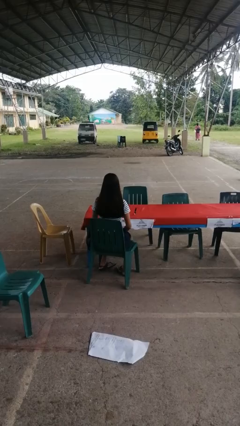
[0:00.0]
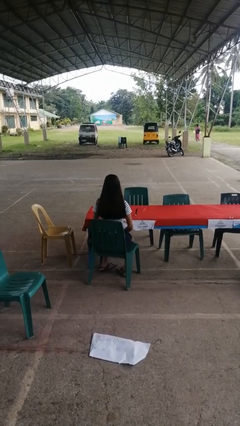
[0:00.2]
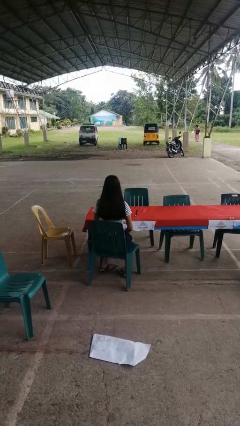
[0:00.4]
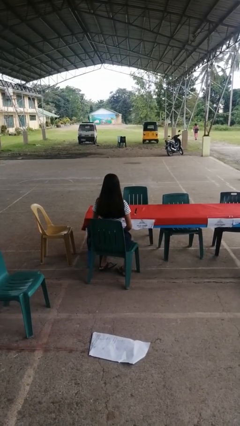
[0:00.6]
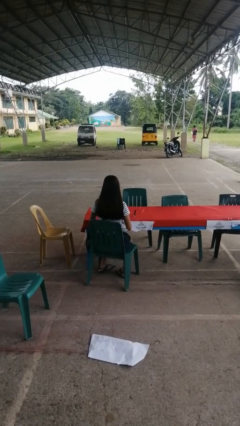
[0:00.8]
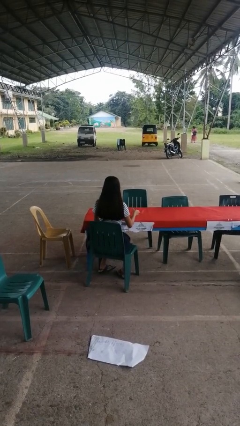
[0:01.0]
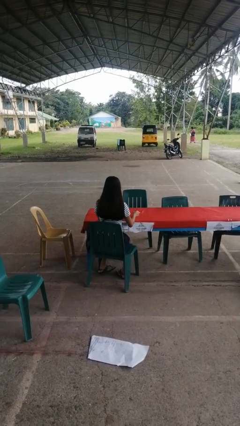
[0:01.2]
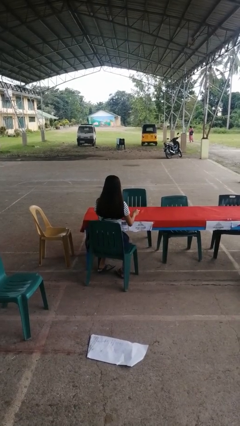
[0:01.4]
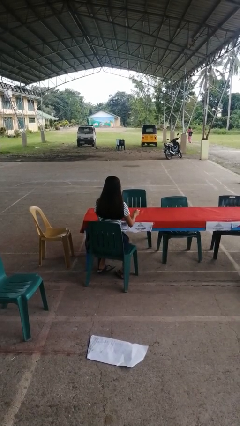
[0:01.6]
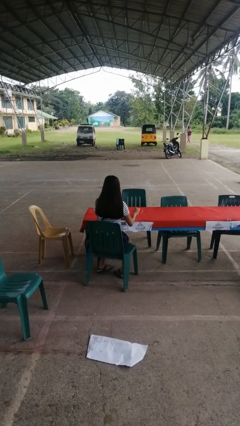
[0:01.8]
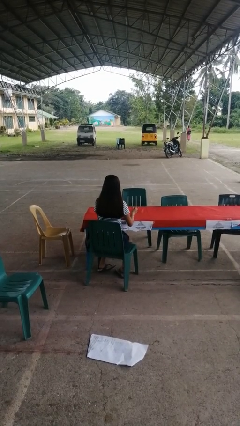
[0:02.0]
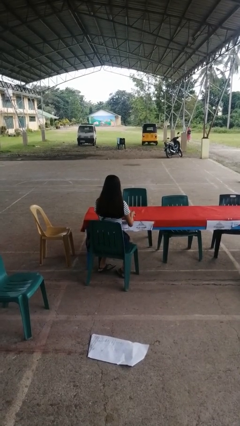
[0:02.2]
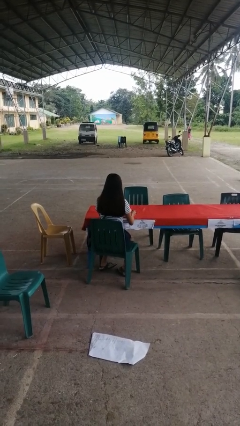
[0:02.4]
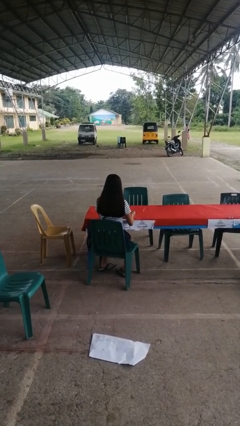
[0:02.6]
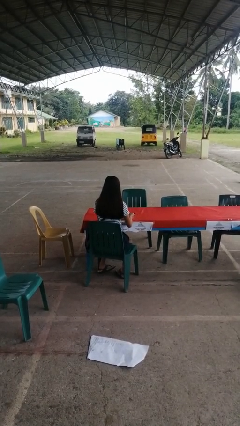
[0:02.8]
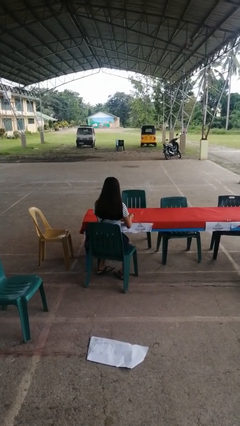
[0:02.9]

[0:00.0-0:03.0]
person paints fingernails

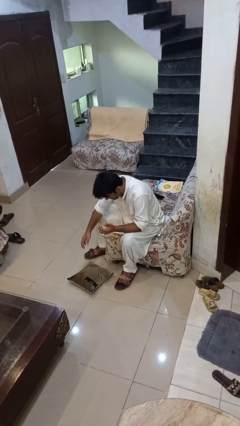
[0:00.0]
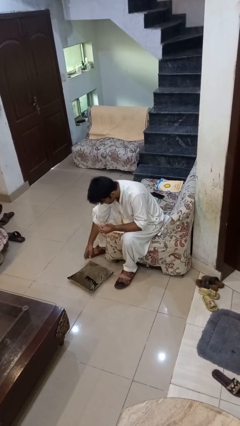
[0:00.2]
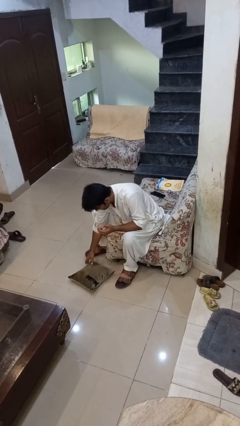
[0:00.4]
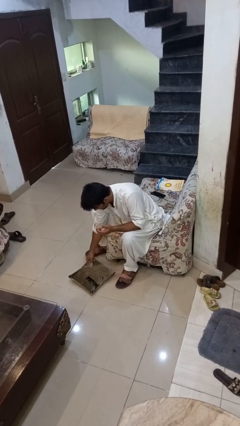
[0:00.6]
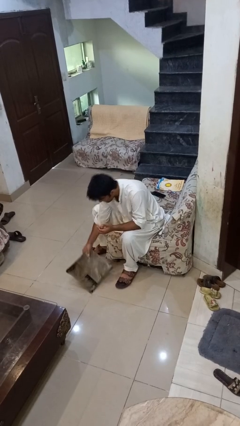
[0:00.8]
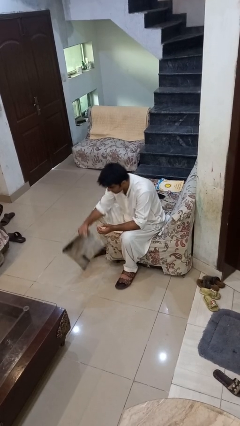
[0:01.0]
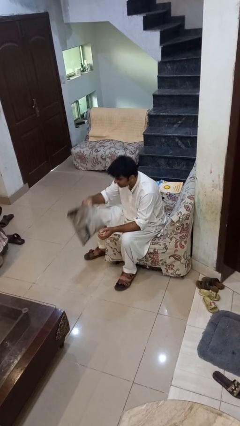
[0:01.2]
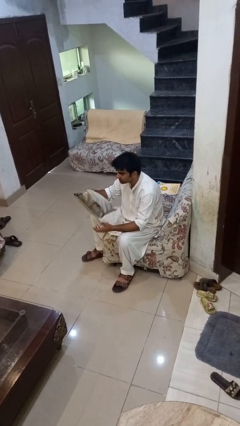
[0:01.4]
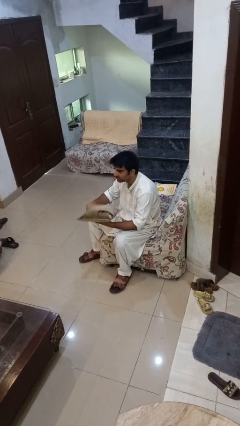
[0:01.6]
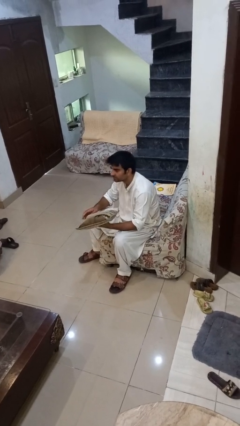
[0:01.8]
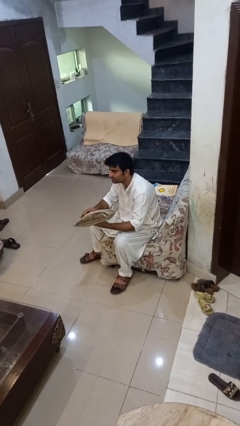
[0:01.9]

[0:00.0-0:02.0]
person picks up object from floor

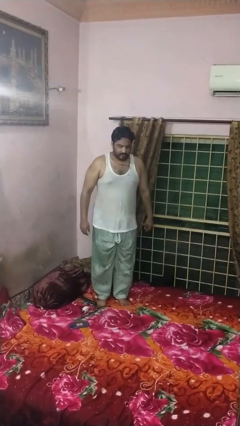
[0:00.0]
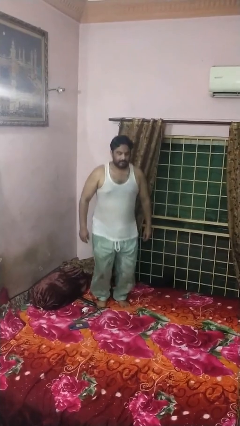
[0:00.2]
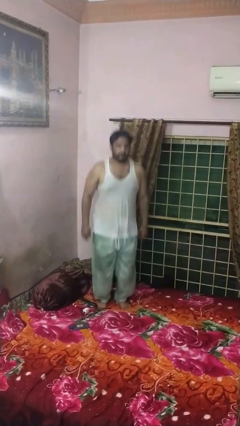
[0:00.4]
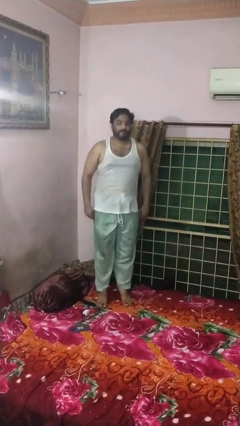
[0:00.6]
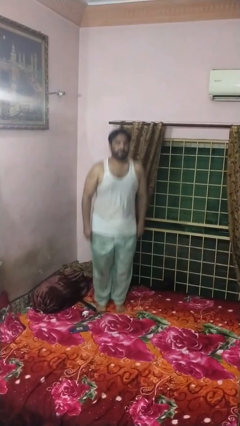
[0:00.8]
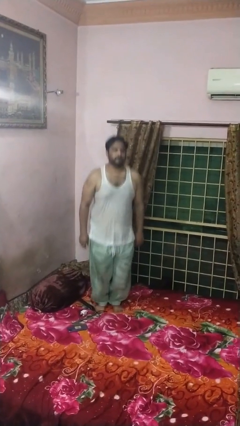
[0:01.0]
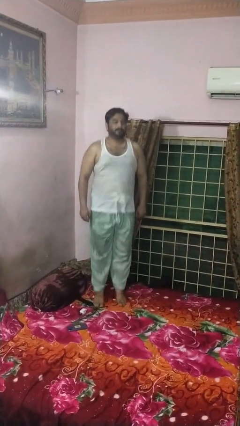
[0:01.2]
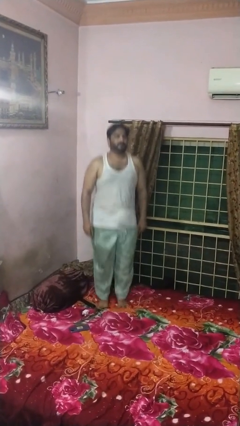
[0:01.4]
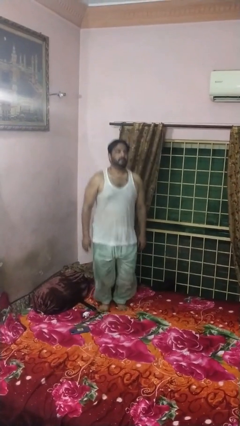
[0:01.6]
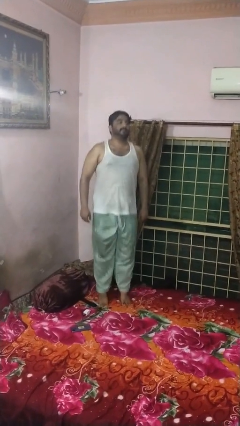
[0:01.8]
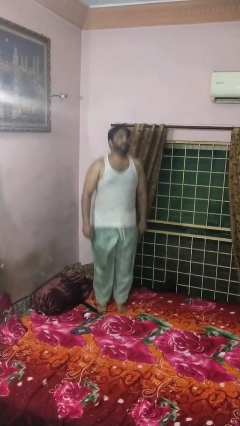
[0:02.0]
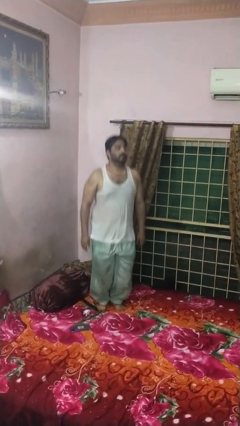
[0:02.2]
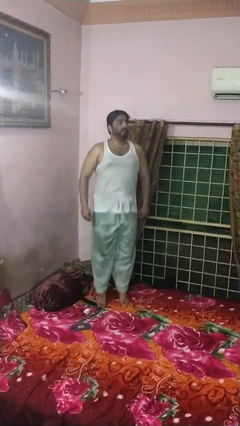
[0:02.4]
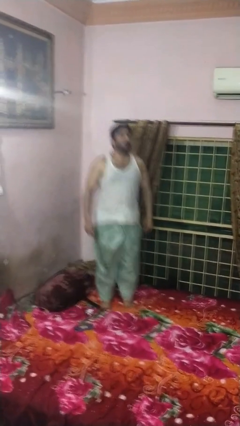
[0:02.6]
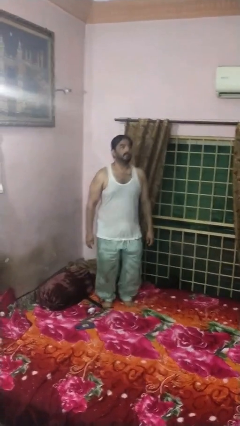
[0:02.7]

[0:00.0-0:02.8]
person jumps on bed

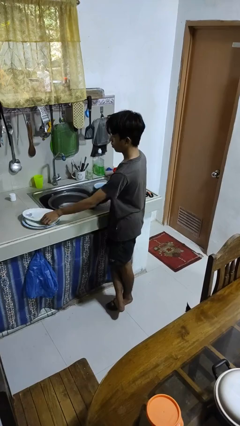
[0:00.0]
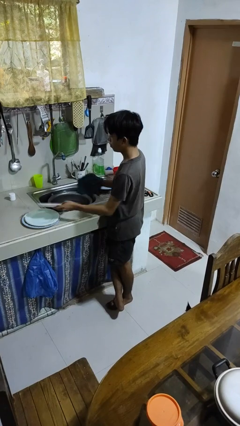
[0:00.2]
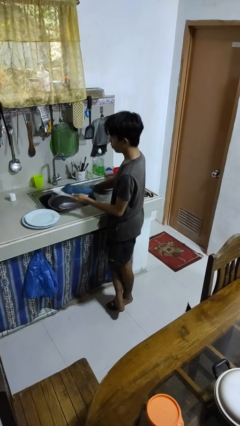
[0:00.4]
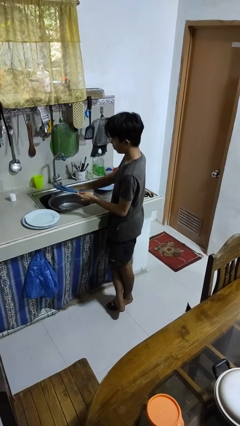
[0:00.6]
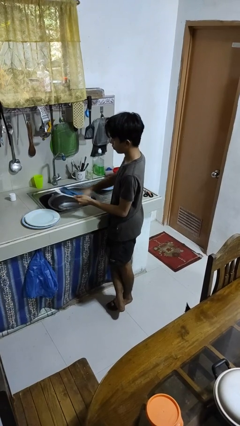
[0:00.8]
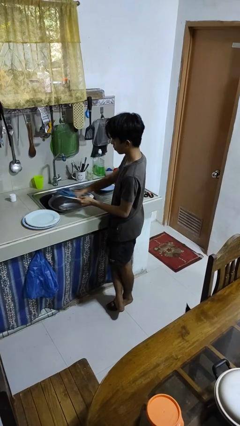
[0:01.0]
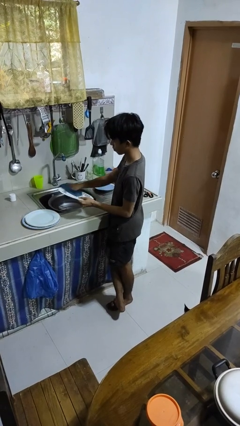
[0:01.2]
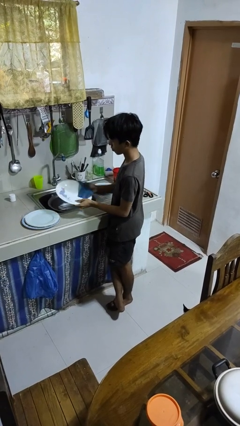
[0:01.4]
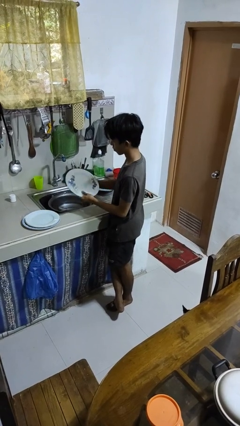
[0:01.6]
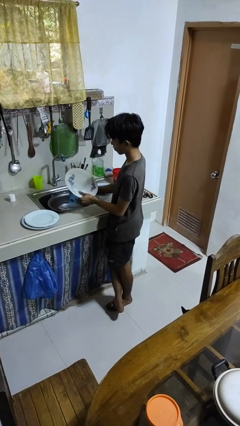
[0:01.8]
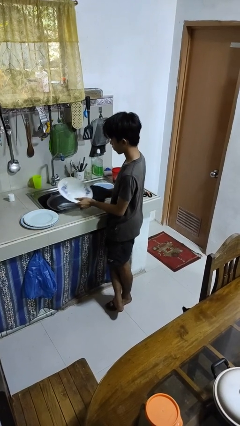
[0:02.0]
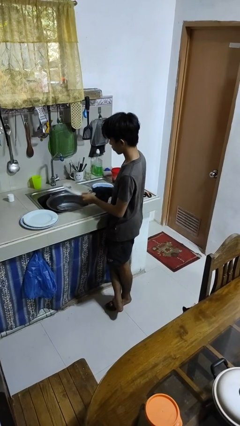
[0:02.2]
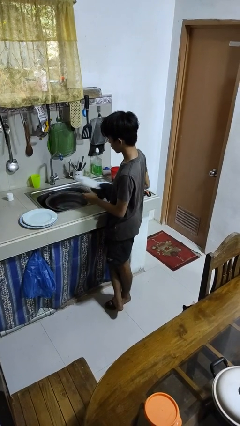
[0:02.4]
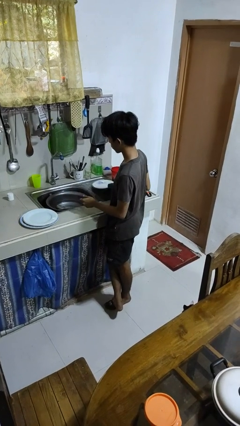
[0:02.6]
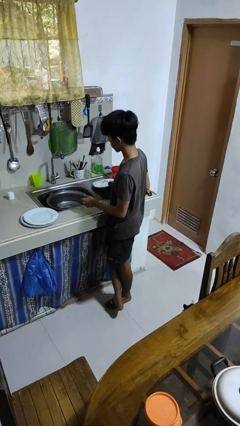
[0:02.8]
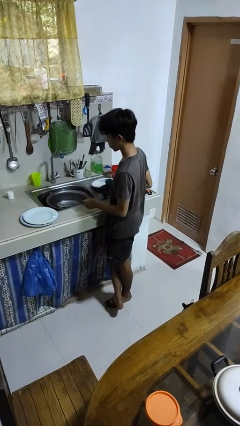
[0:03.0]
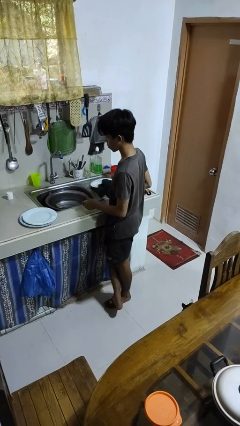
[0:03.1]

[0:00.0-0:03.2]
person dries dish

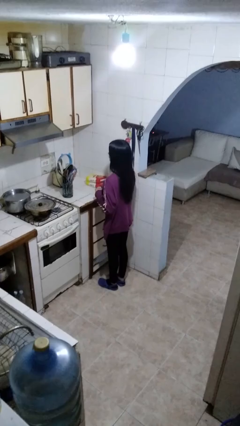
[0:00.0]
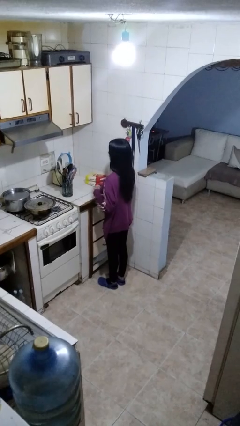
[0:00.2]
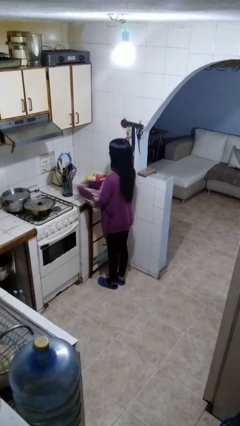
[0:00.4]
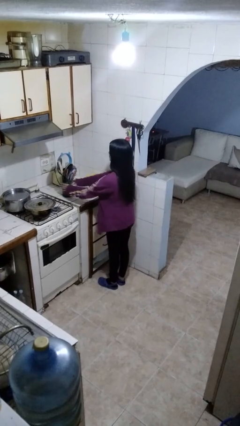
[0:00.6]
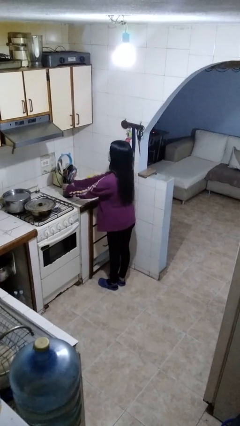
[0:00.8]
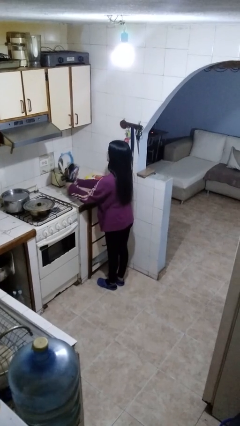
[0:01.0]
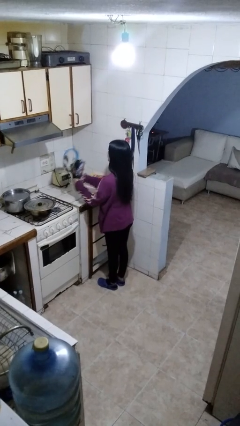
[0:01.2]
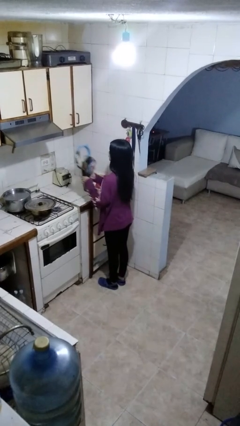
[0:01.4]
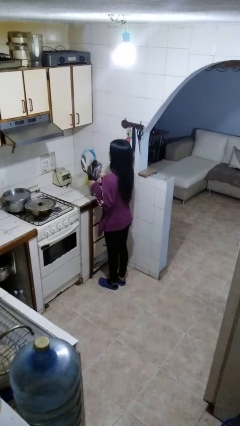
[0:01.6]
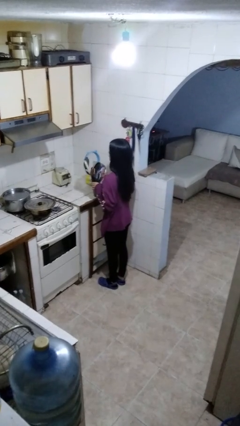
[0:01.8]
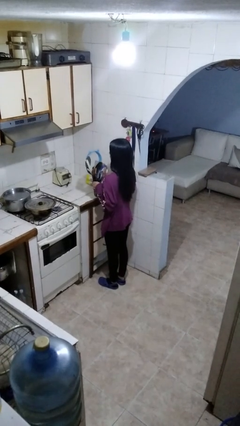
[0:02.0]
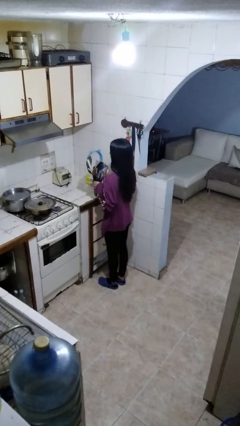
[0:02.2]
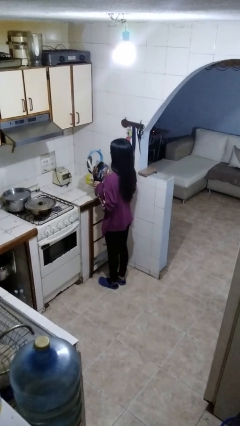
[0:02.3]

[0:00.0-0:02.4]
person puts down object on countertop

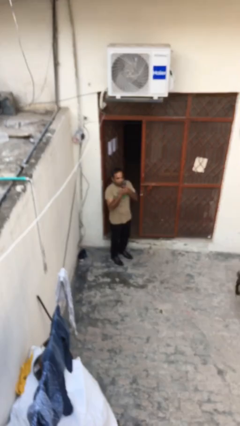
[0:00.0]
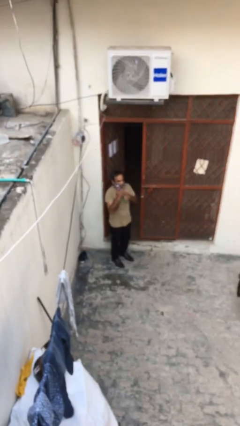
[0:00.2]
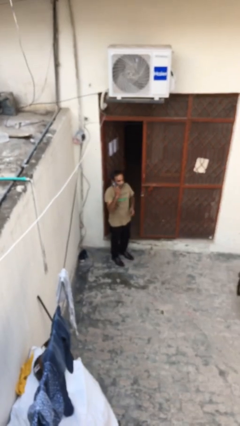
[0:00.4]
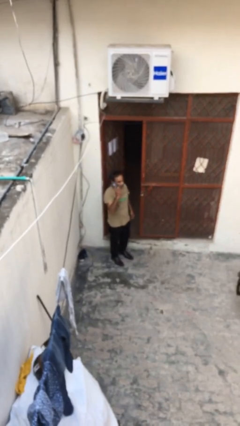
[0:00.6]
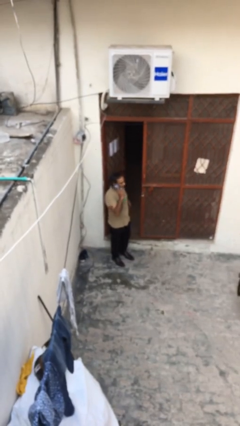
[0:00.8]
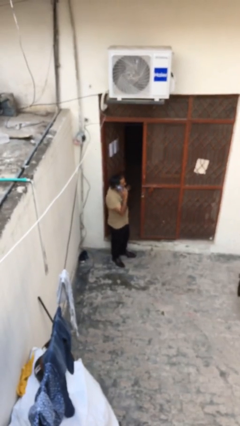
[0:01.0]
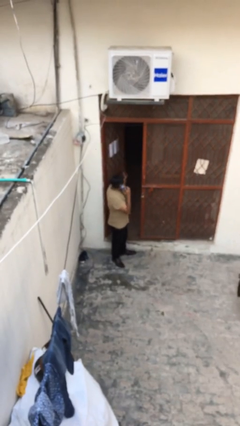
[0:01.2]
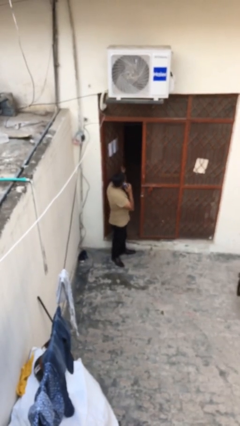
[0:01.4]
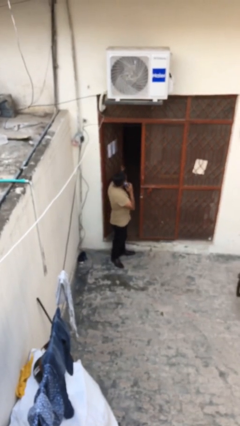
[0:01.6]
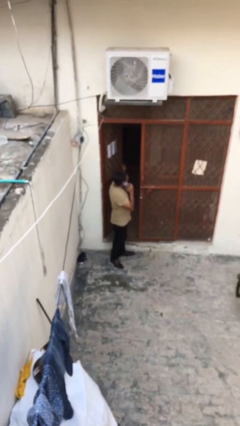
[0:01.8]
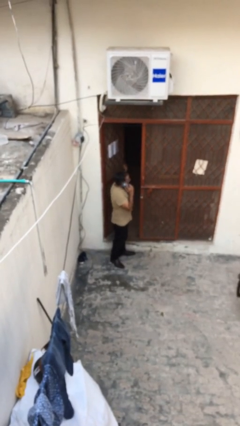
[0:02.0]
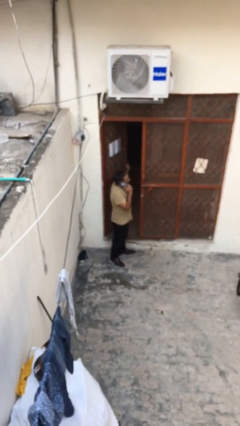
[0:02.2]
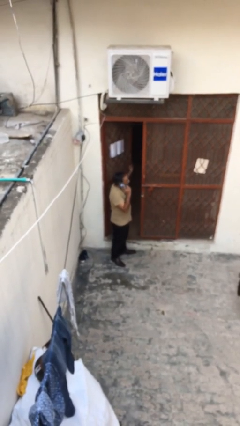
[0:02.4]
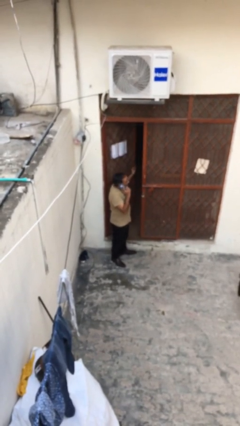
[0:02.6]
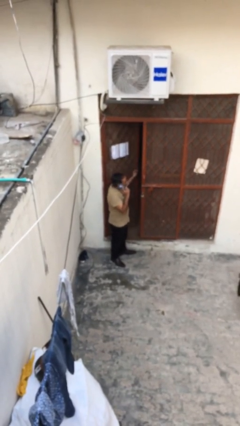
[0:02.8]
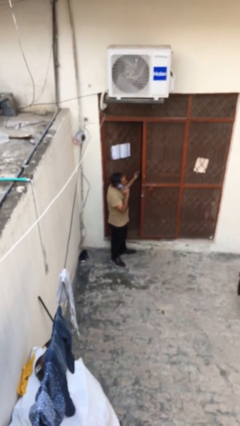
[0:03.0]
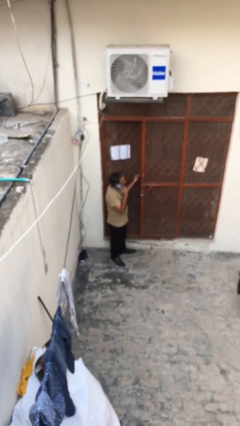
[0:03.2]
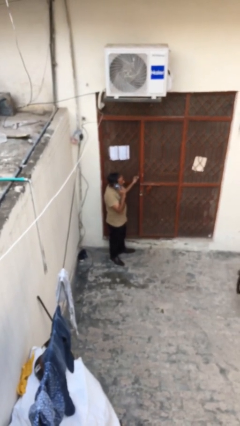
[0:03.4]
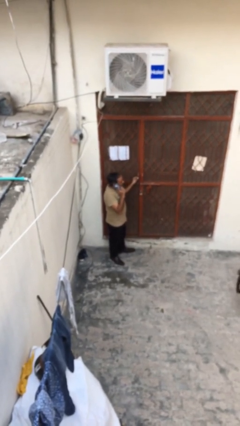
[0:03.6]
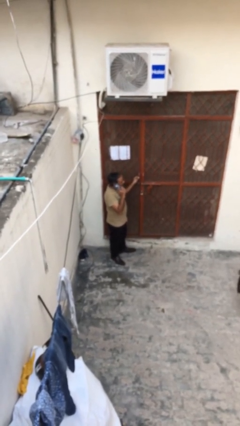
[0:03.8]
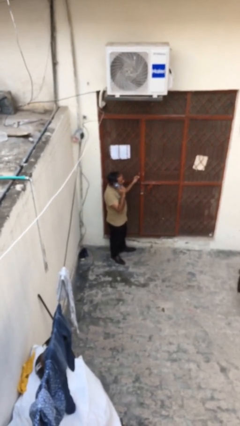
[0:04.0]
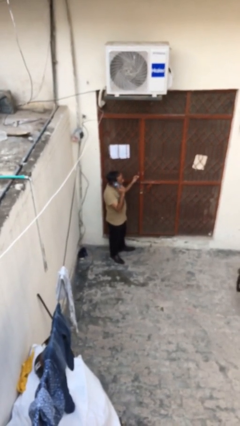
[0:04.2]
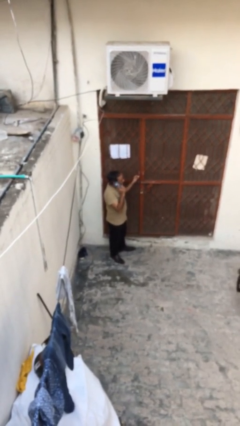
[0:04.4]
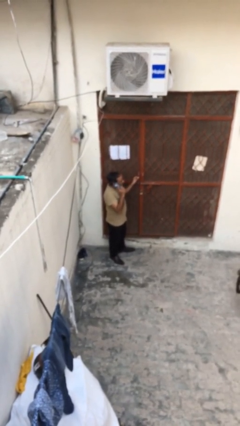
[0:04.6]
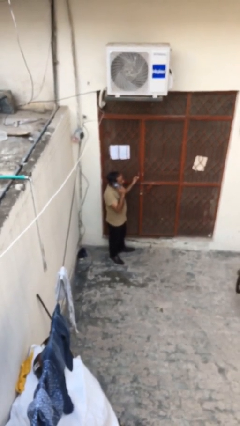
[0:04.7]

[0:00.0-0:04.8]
person closes facility door
